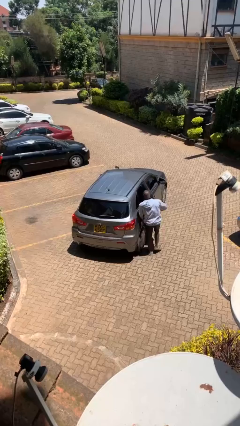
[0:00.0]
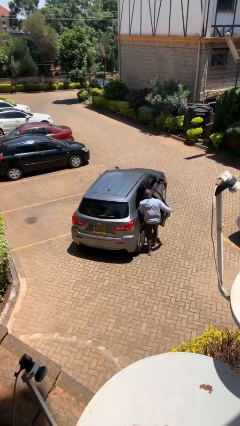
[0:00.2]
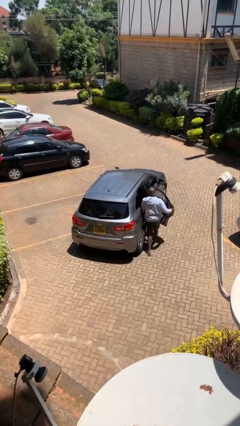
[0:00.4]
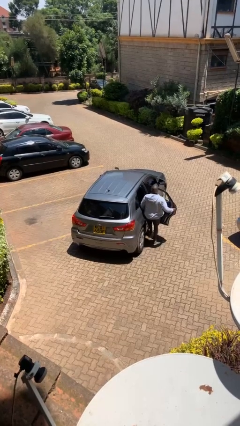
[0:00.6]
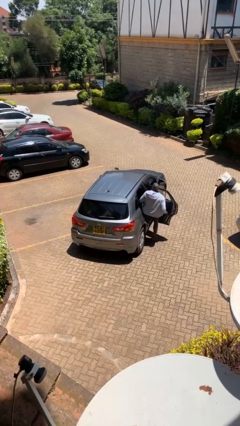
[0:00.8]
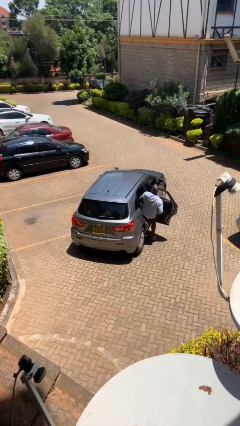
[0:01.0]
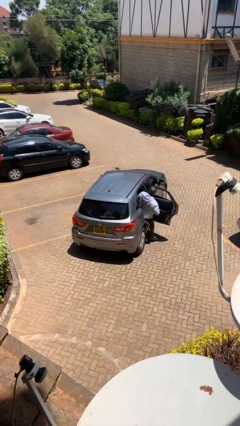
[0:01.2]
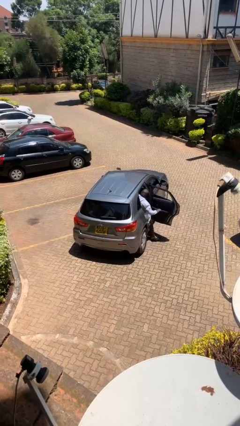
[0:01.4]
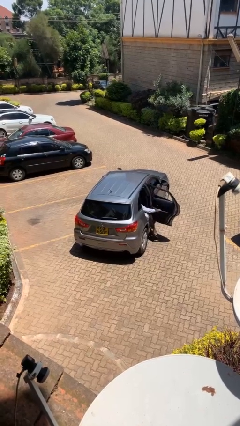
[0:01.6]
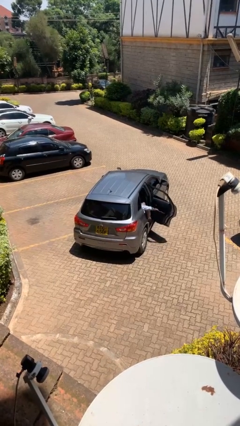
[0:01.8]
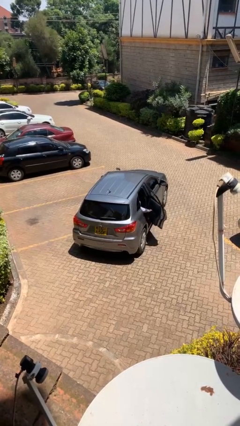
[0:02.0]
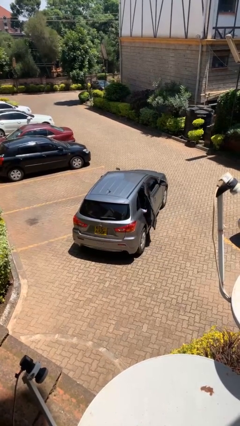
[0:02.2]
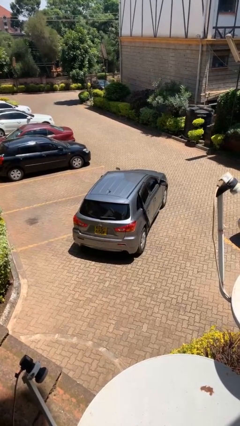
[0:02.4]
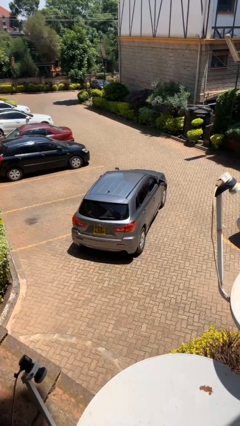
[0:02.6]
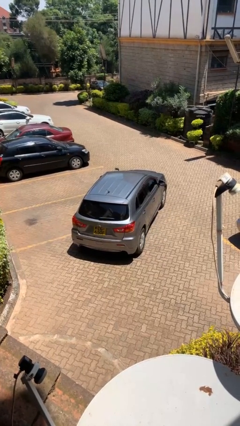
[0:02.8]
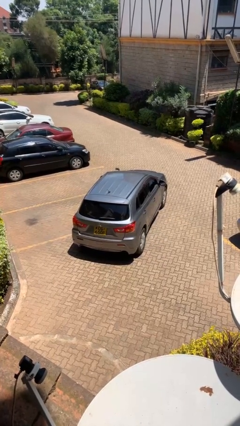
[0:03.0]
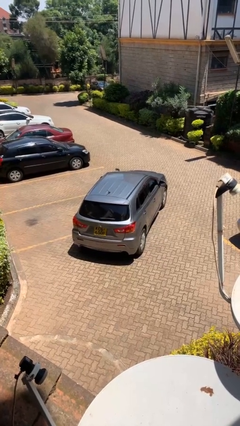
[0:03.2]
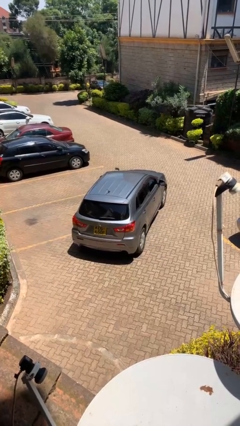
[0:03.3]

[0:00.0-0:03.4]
car picks up person

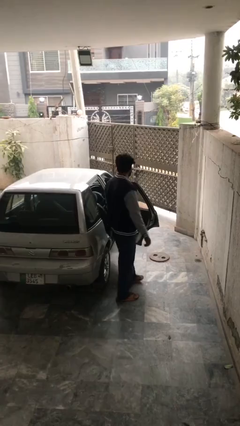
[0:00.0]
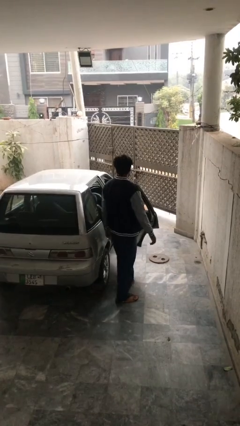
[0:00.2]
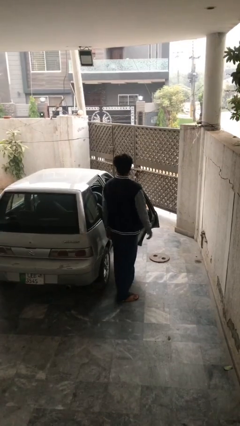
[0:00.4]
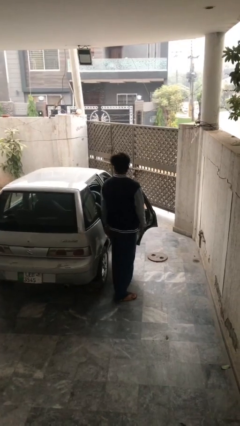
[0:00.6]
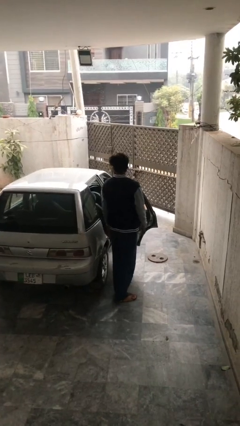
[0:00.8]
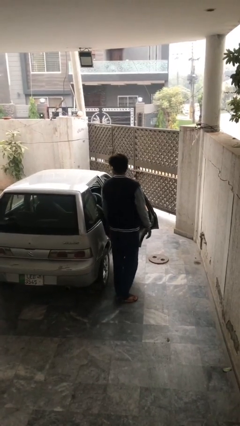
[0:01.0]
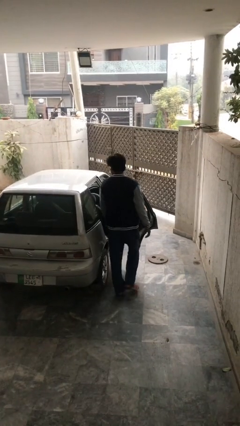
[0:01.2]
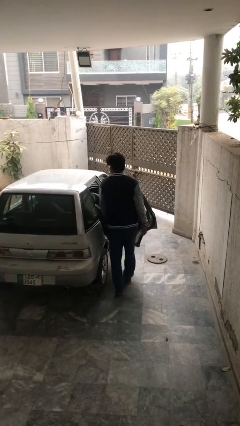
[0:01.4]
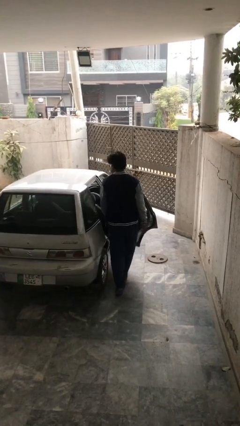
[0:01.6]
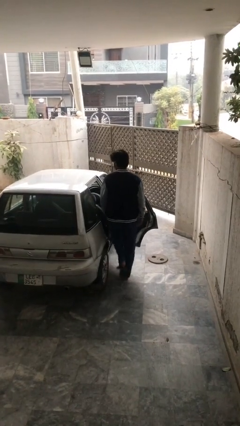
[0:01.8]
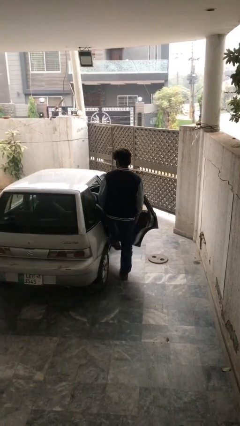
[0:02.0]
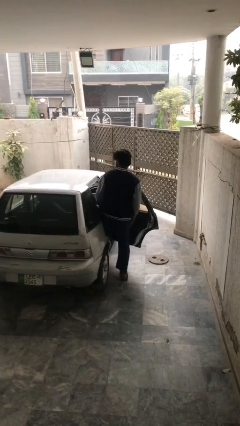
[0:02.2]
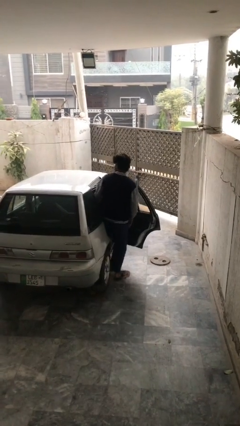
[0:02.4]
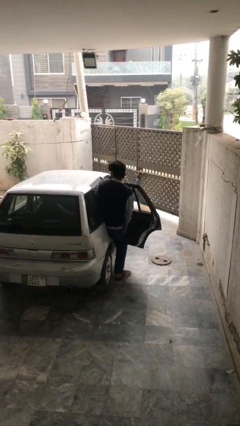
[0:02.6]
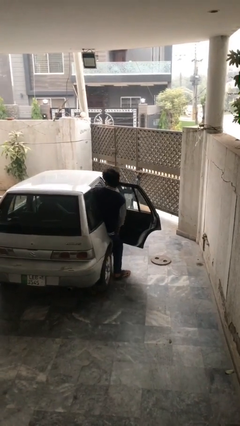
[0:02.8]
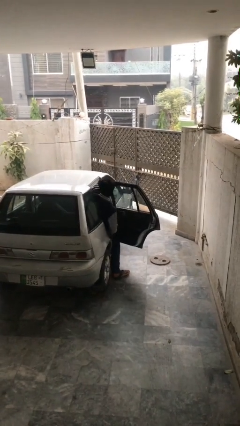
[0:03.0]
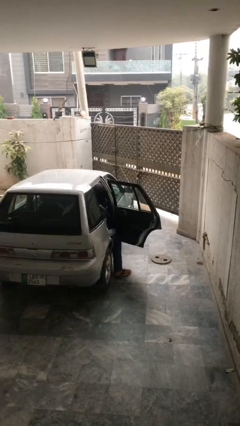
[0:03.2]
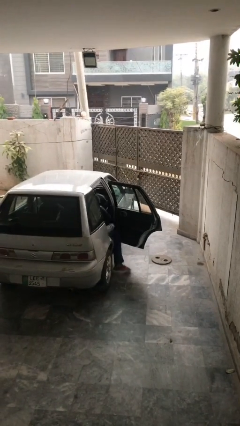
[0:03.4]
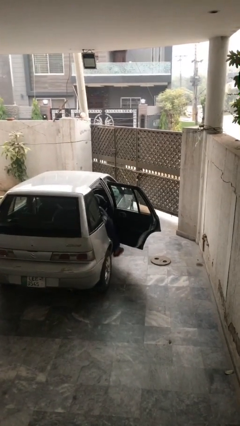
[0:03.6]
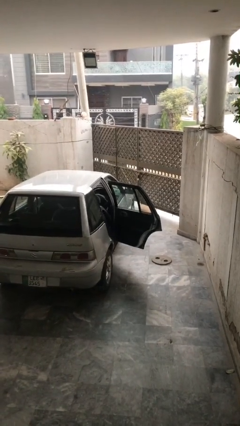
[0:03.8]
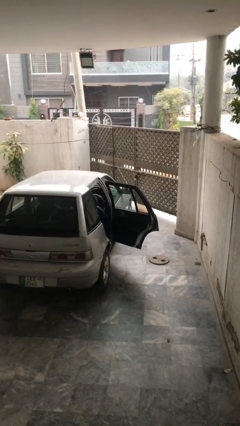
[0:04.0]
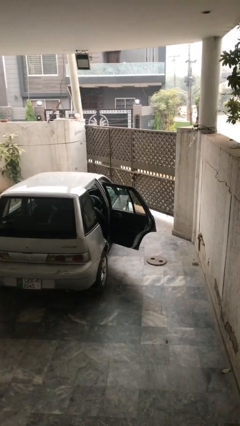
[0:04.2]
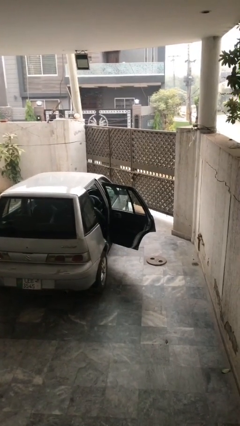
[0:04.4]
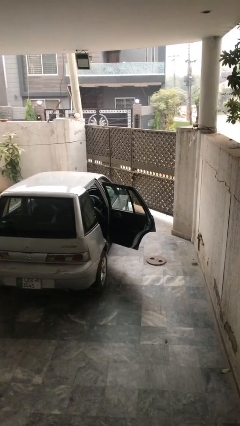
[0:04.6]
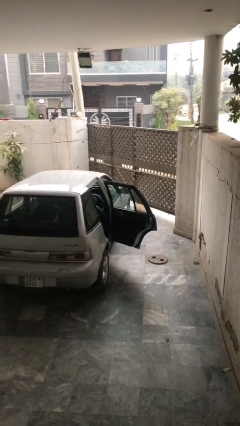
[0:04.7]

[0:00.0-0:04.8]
person enters car

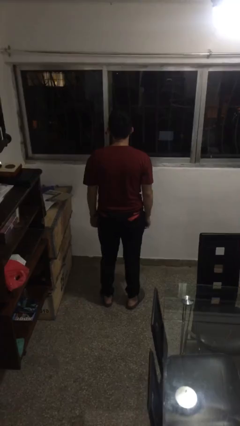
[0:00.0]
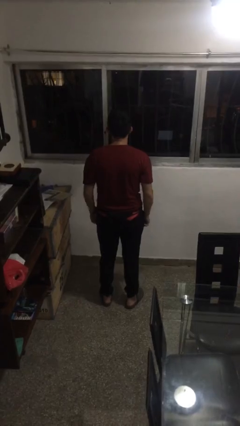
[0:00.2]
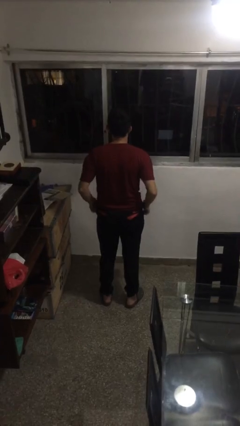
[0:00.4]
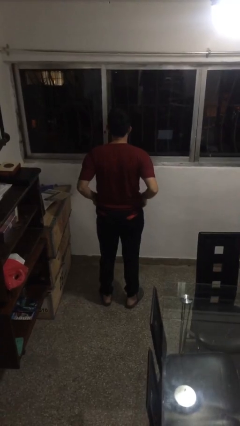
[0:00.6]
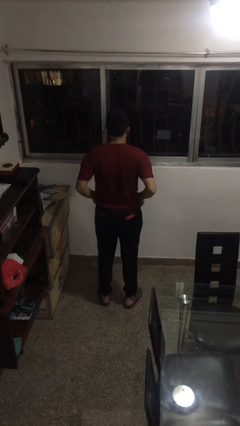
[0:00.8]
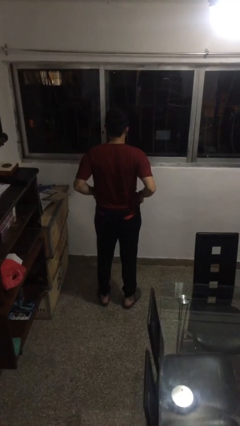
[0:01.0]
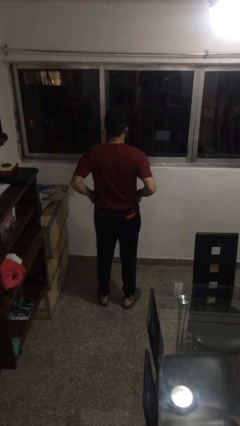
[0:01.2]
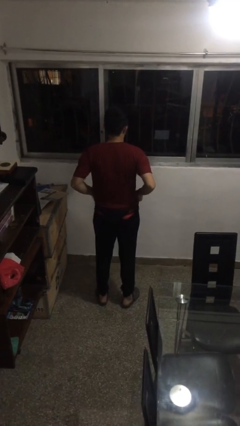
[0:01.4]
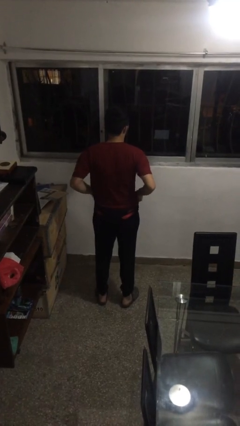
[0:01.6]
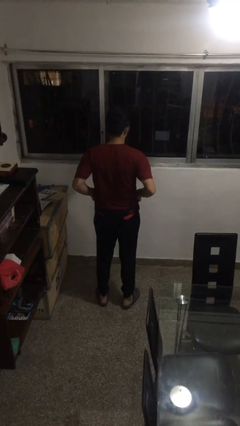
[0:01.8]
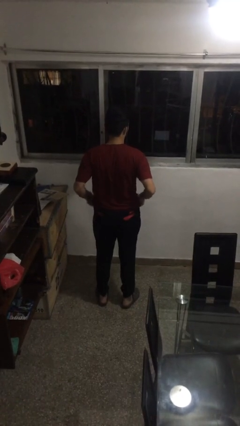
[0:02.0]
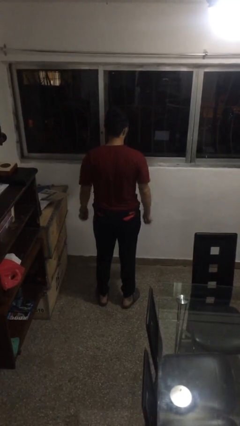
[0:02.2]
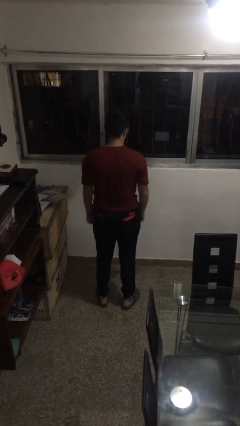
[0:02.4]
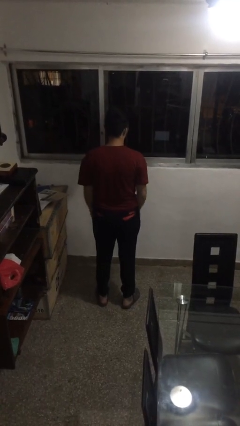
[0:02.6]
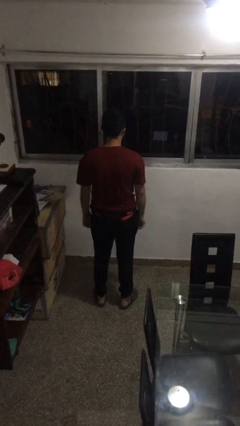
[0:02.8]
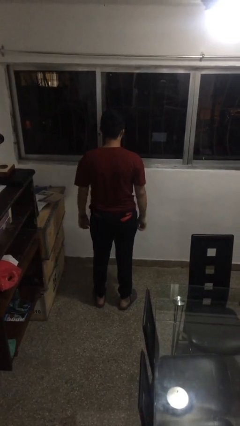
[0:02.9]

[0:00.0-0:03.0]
person hikes up pants

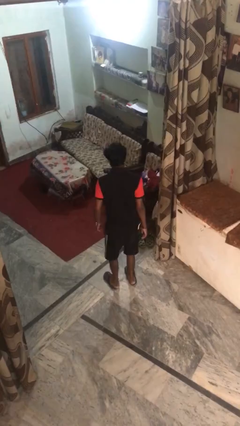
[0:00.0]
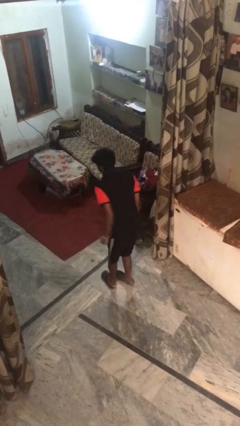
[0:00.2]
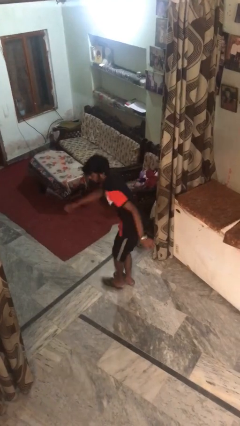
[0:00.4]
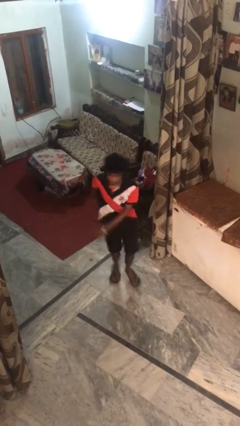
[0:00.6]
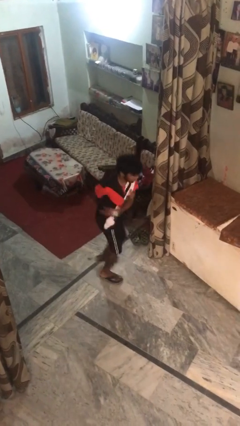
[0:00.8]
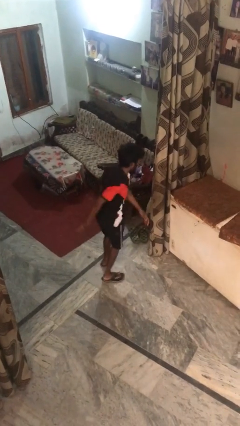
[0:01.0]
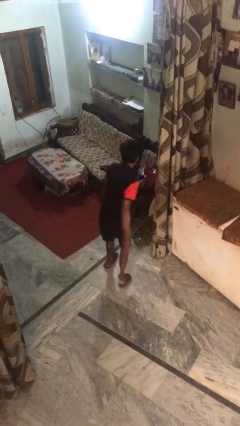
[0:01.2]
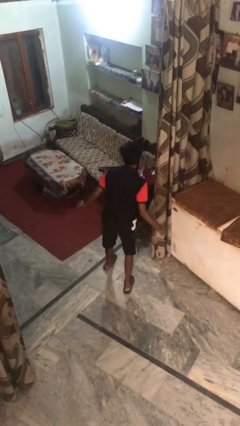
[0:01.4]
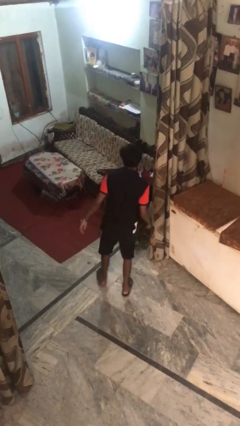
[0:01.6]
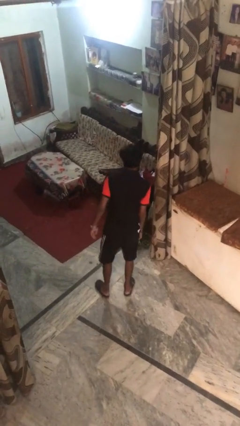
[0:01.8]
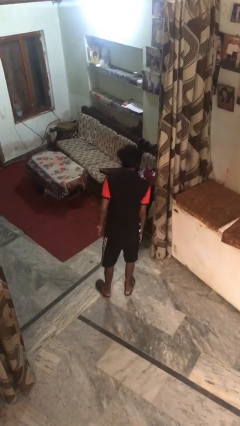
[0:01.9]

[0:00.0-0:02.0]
person twirls

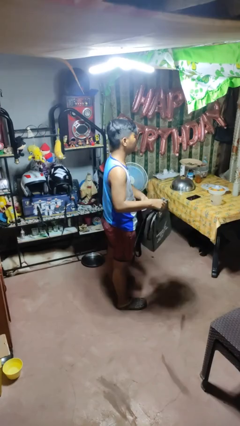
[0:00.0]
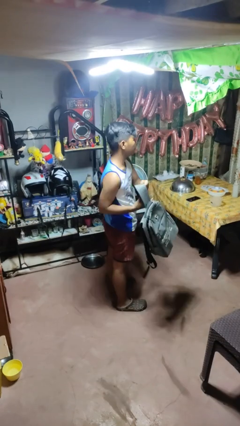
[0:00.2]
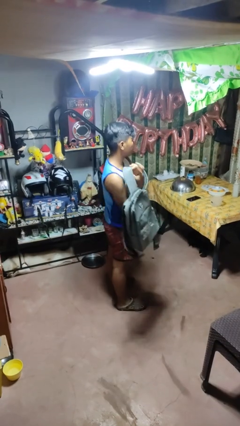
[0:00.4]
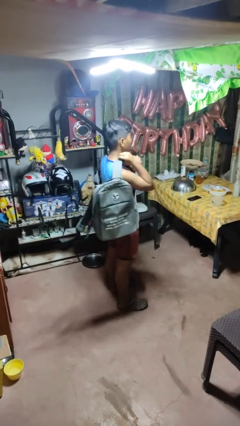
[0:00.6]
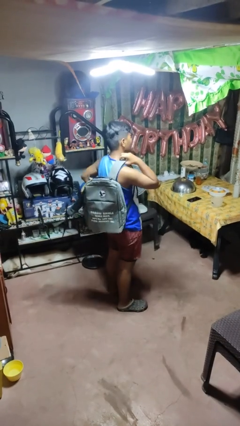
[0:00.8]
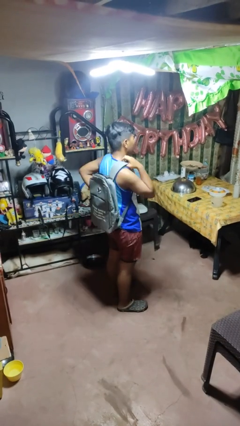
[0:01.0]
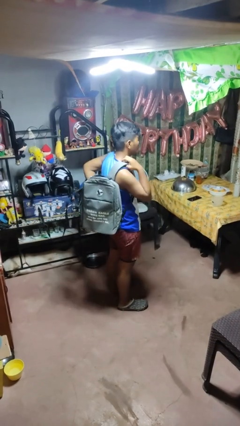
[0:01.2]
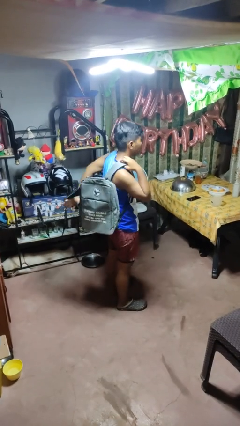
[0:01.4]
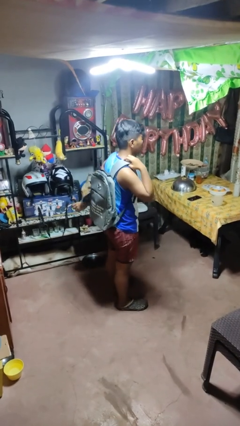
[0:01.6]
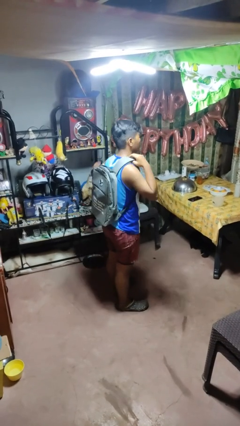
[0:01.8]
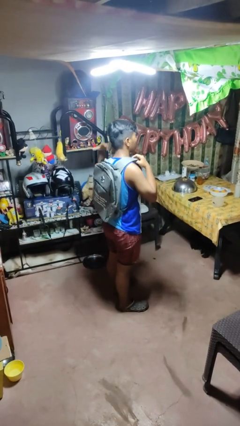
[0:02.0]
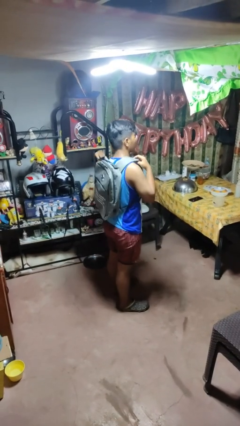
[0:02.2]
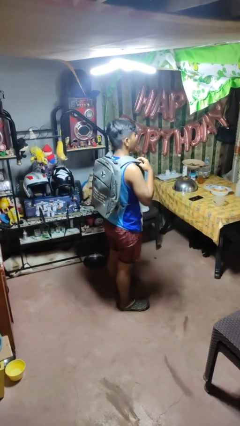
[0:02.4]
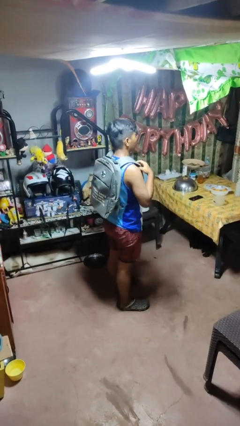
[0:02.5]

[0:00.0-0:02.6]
person puts on backpack

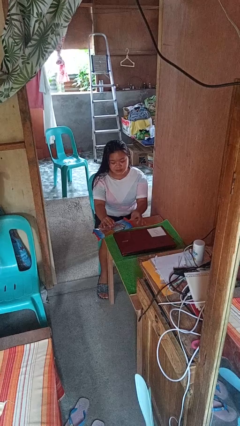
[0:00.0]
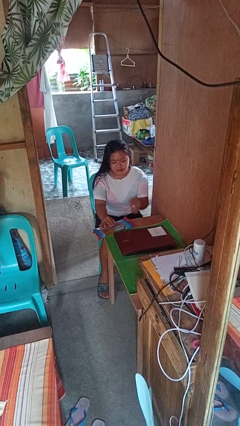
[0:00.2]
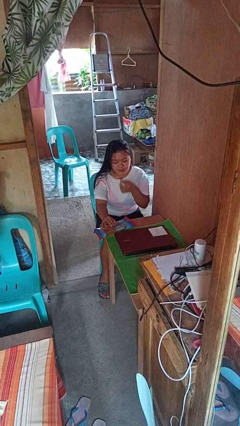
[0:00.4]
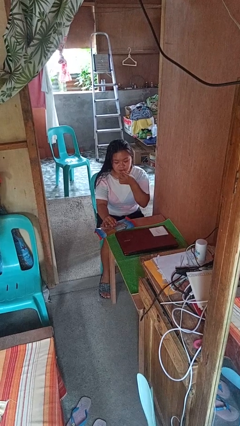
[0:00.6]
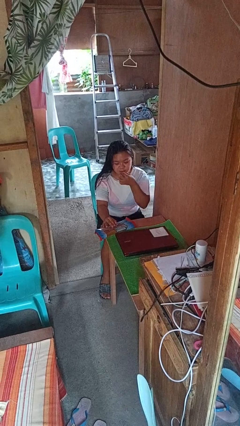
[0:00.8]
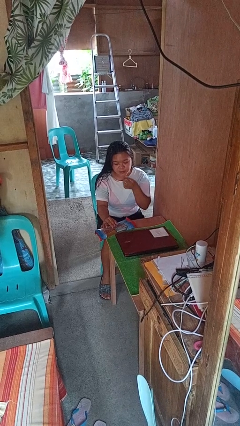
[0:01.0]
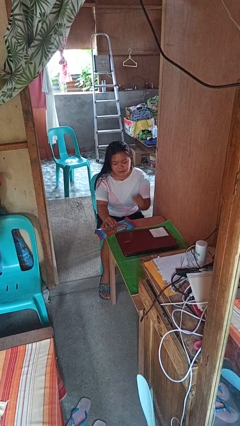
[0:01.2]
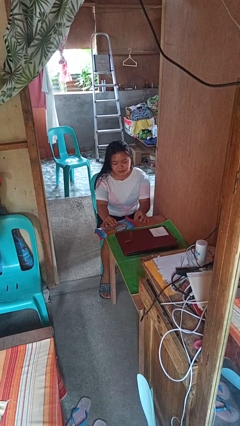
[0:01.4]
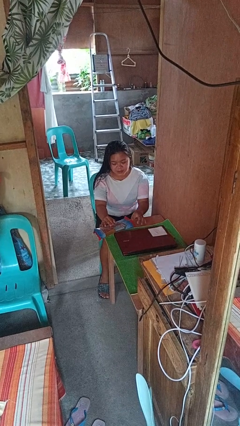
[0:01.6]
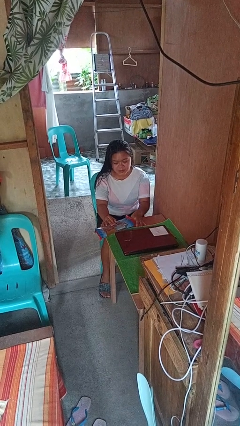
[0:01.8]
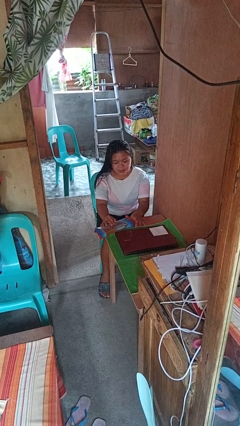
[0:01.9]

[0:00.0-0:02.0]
person eats snack from bag

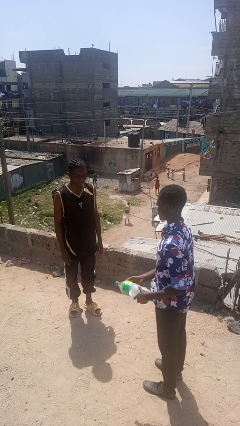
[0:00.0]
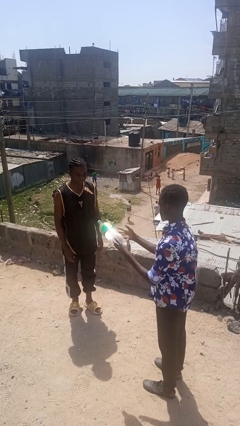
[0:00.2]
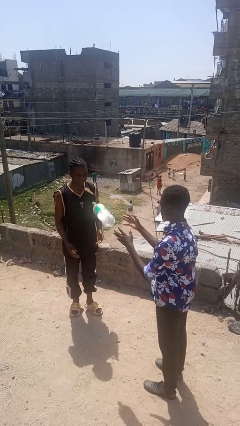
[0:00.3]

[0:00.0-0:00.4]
person throws object to person
